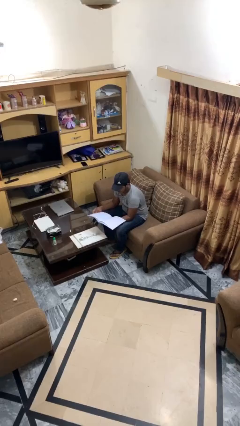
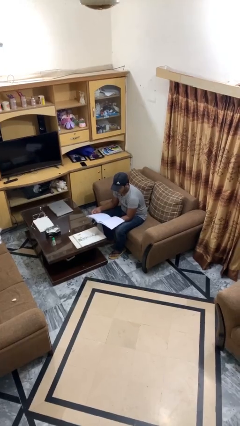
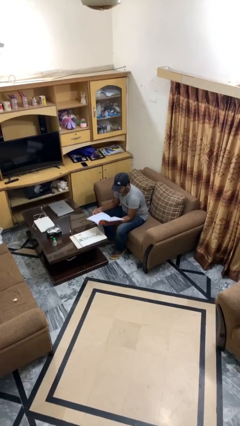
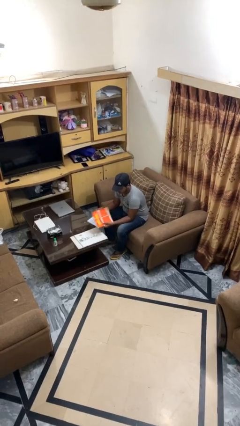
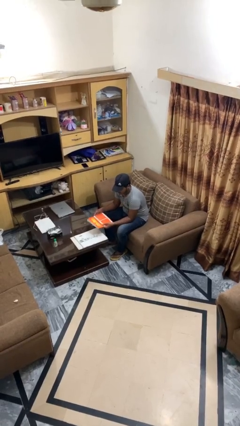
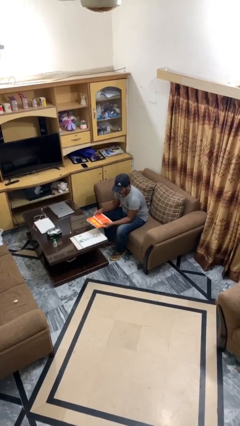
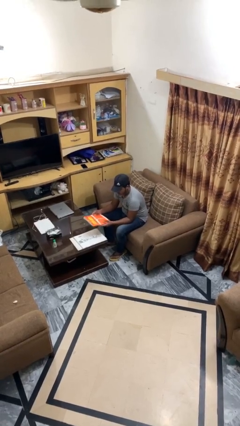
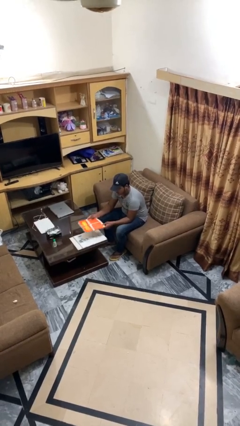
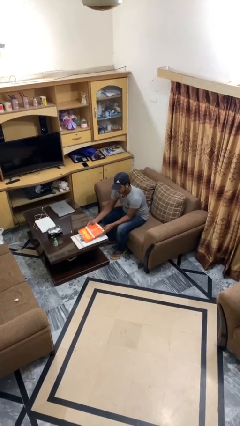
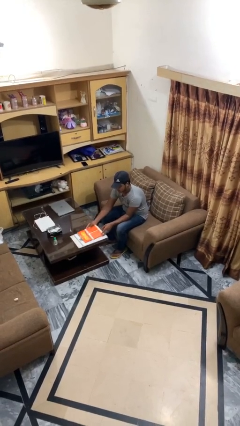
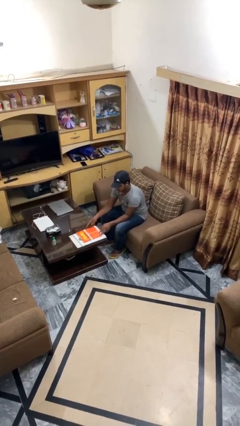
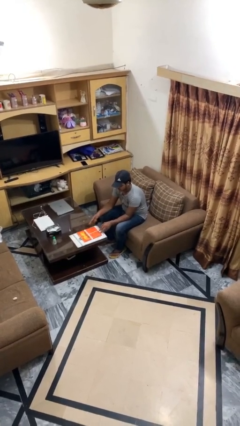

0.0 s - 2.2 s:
person puts down object on table

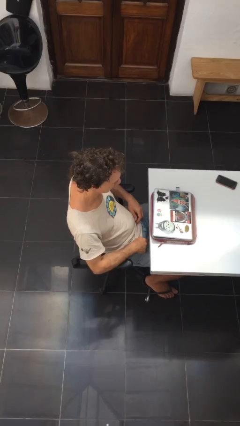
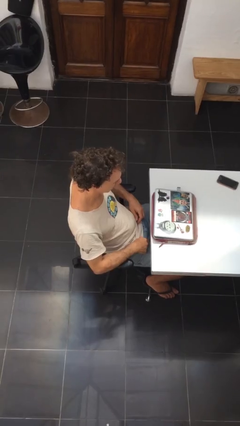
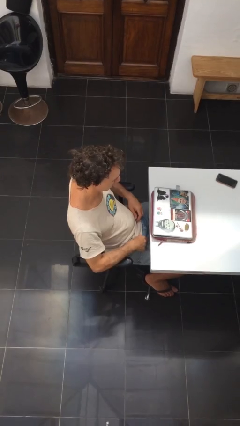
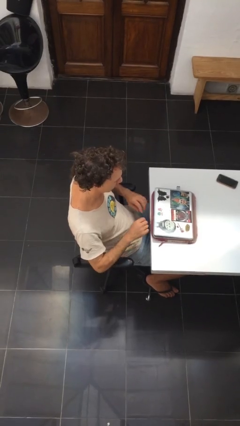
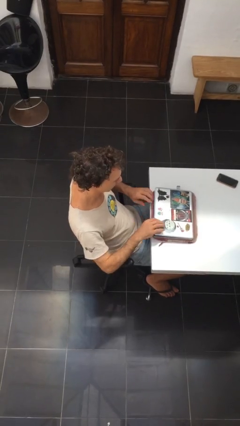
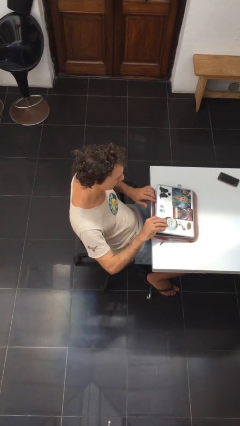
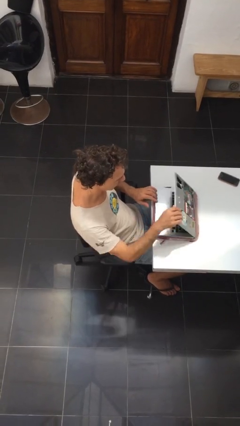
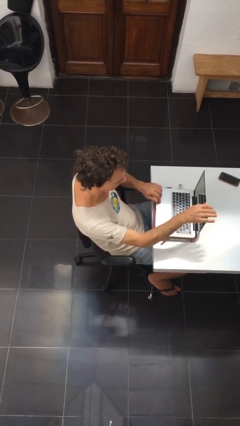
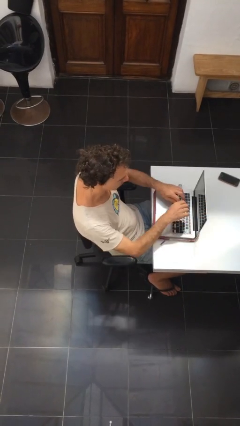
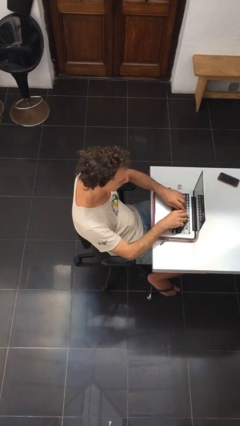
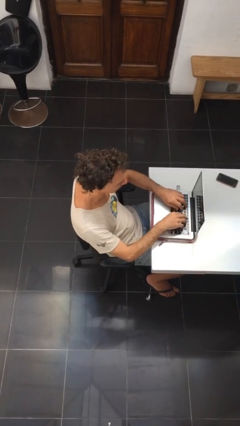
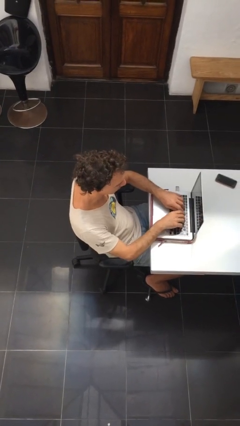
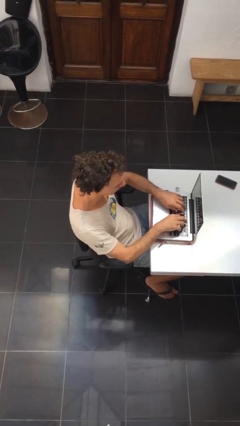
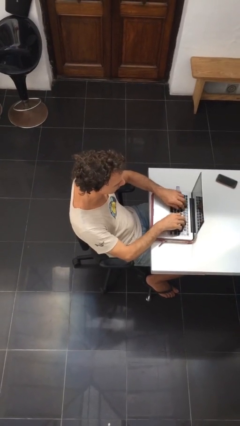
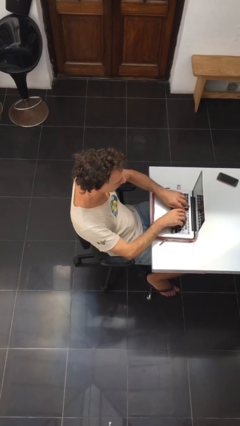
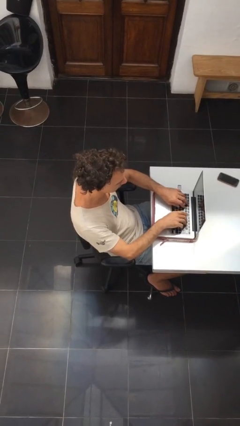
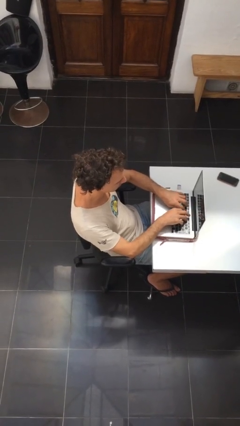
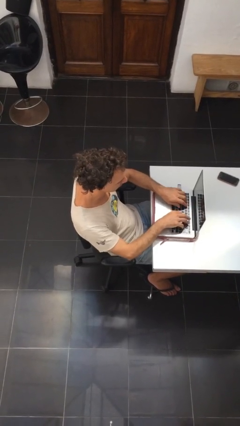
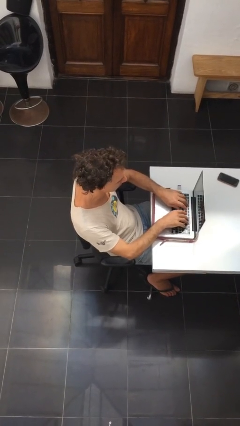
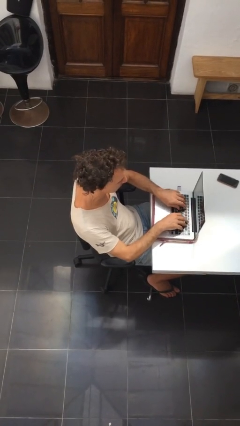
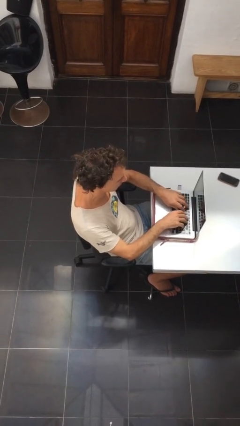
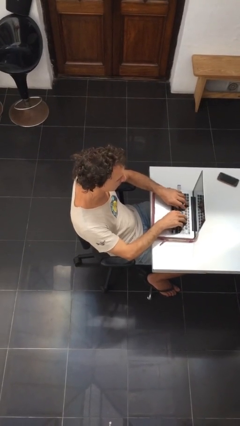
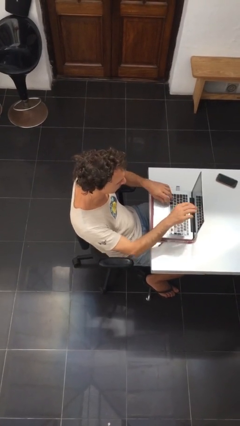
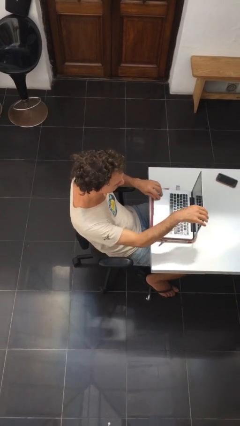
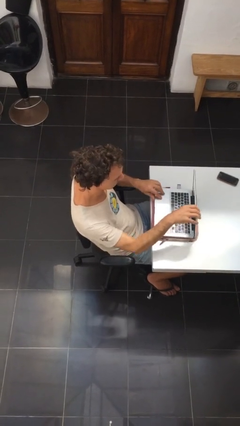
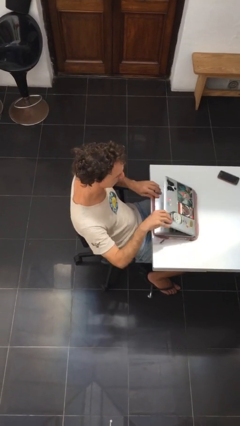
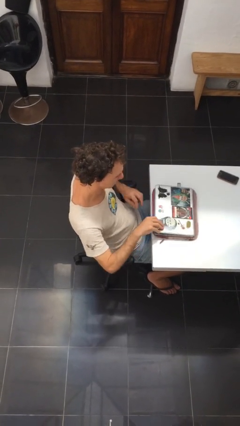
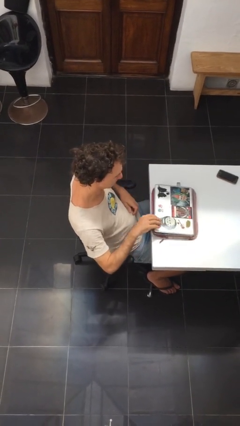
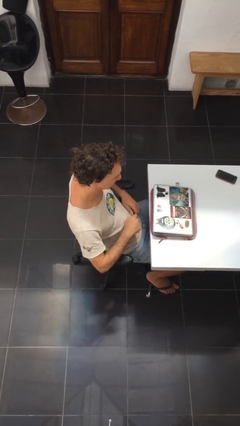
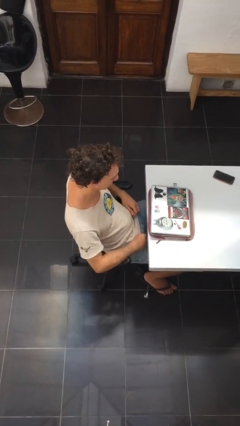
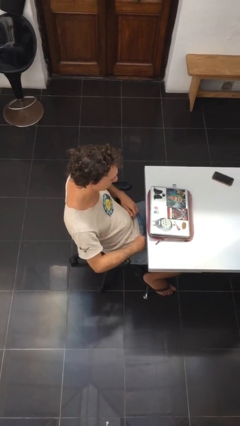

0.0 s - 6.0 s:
person interacts with laptop

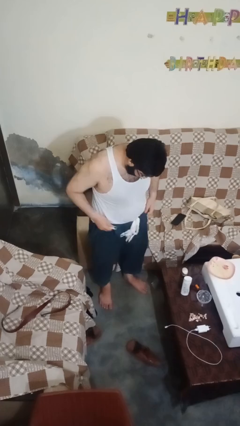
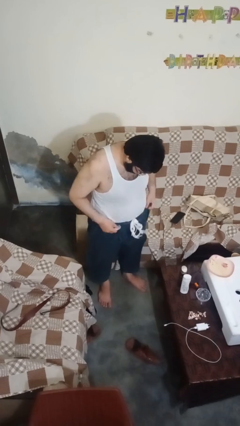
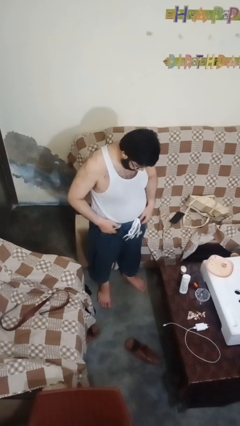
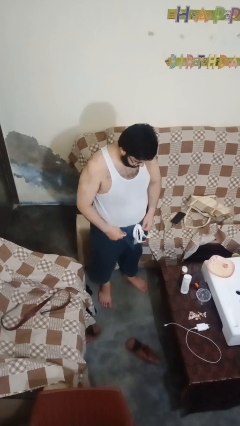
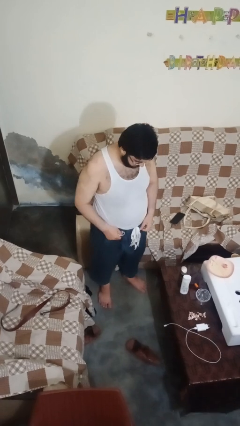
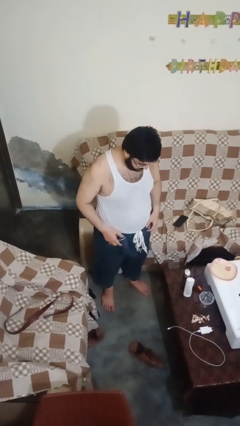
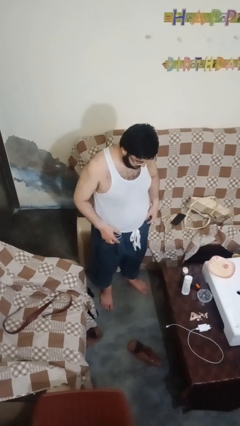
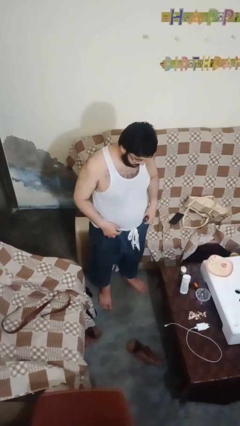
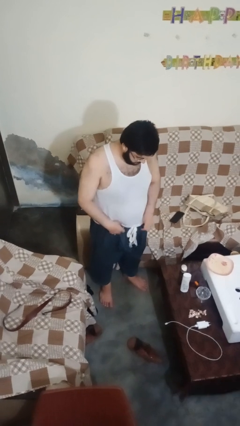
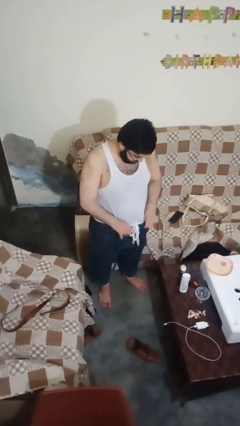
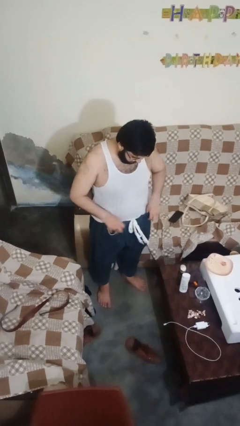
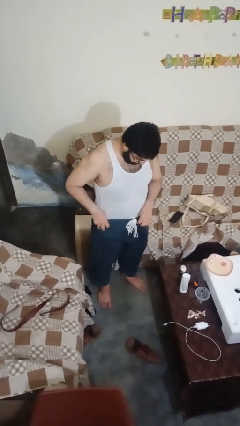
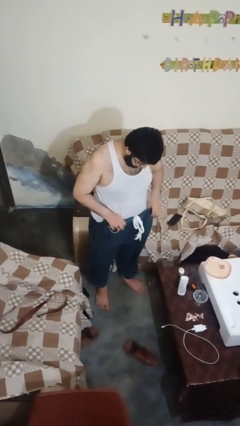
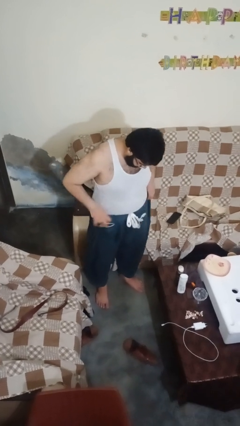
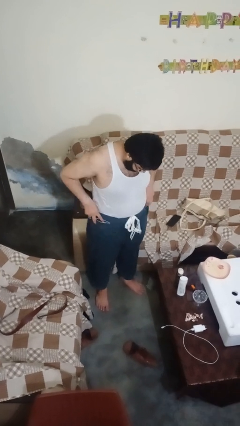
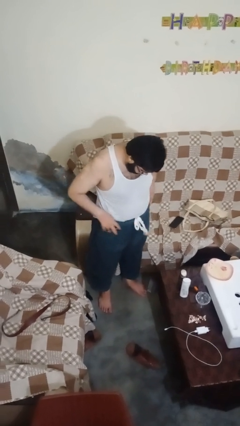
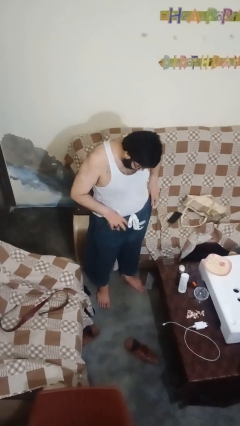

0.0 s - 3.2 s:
person hikes up pants

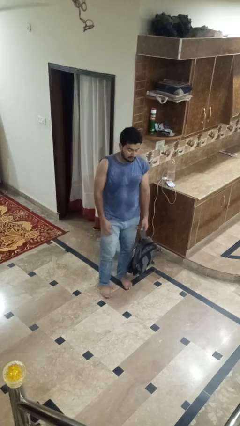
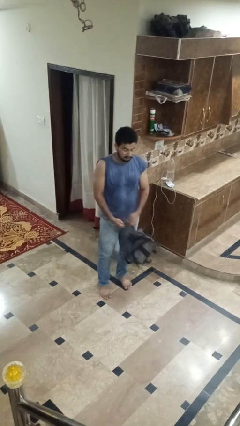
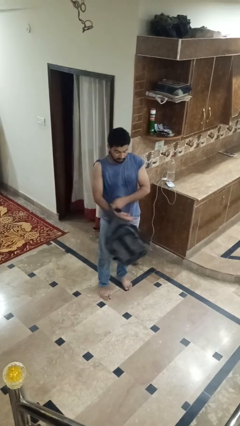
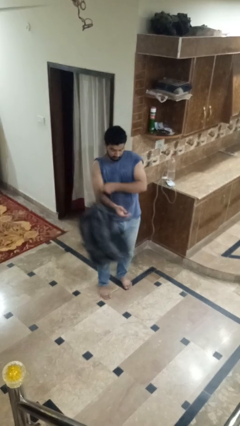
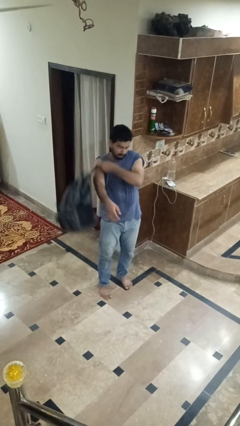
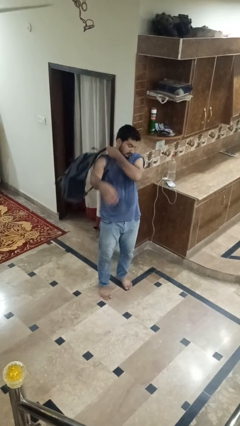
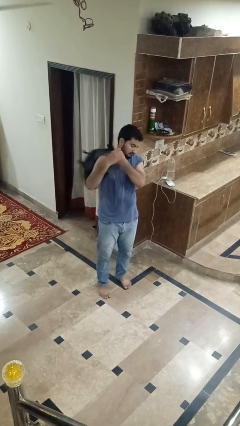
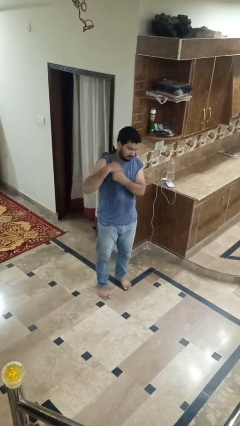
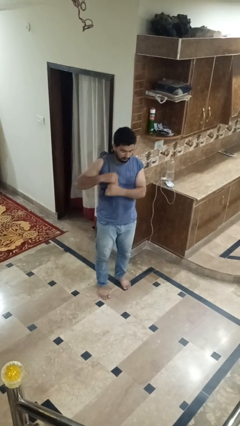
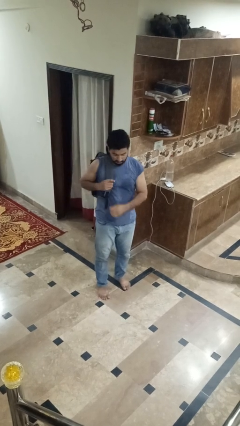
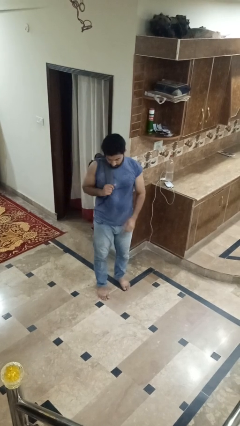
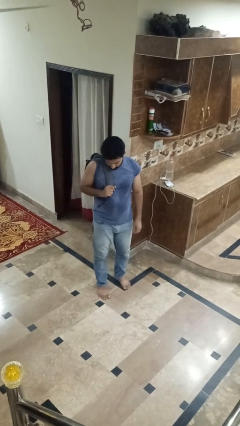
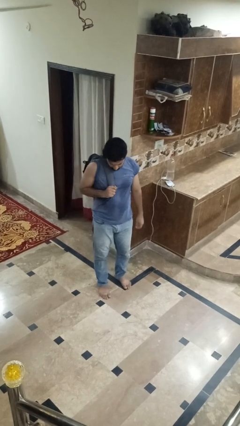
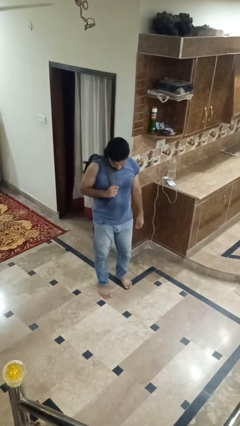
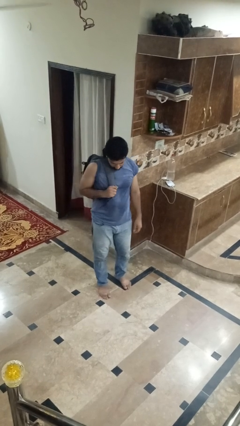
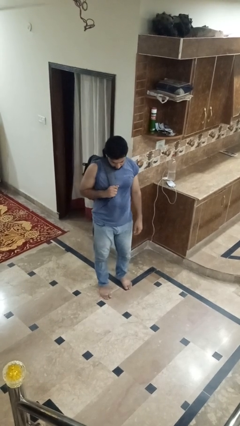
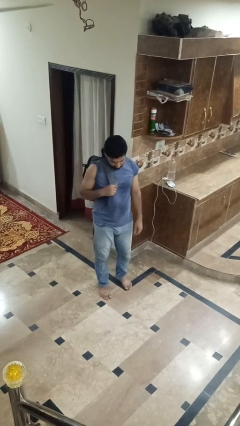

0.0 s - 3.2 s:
person puts on backpack

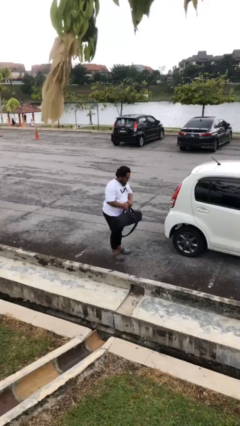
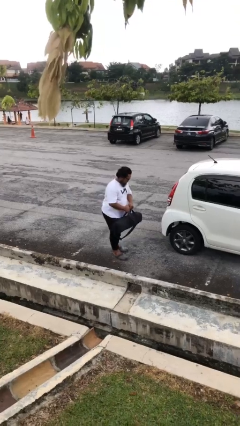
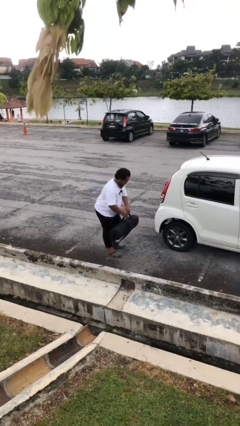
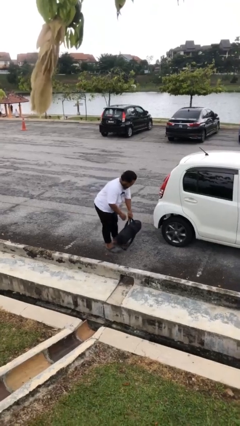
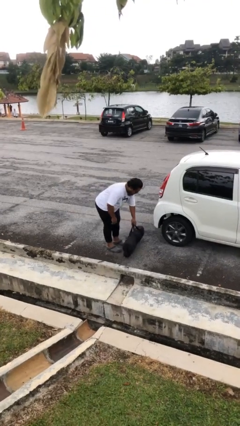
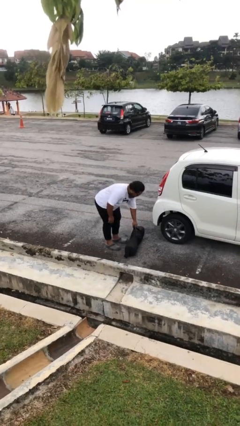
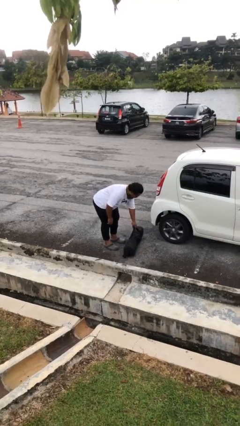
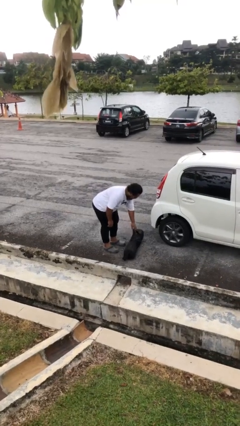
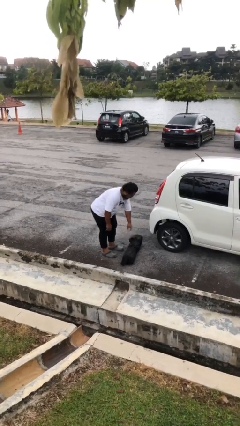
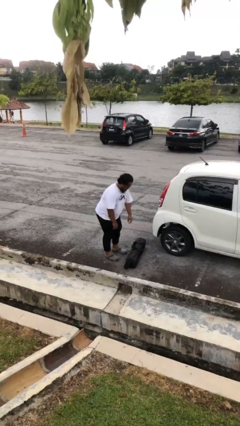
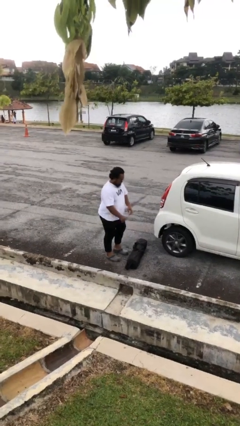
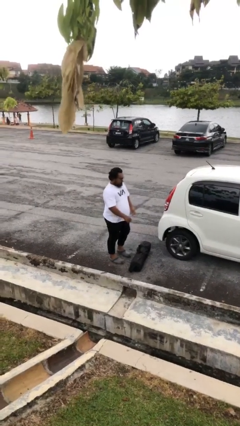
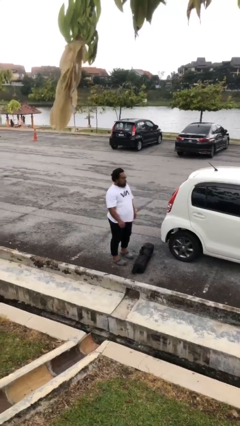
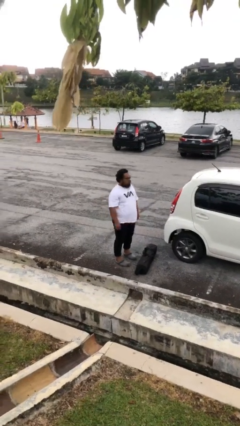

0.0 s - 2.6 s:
person puts down object on floor

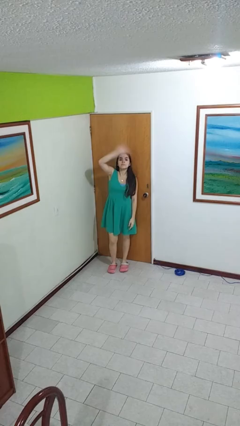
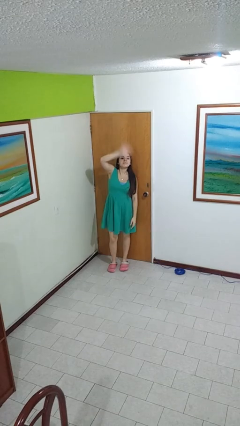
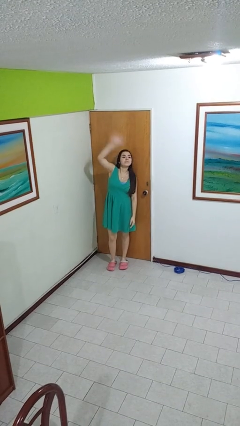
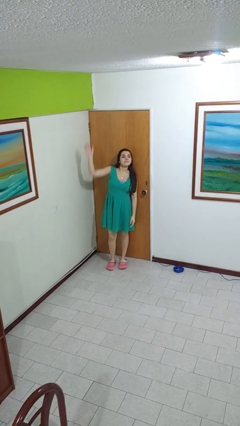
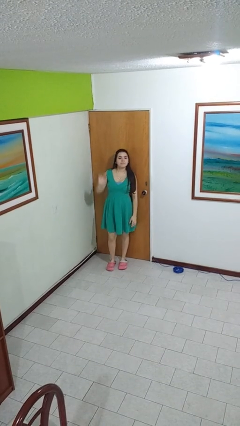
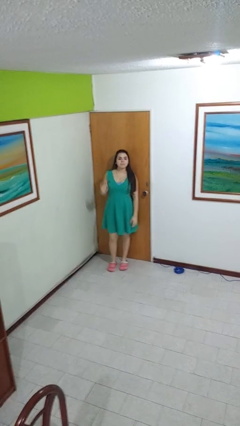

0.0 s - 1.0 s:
person waves at person
